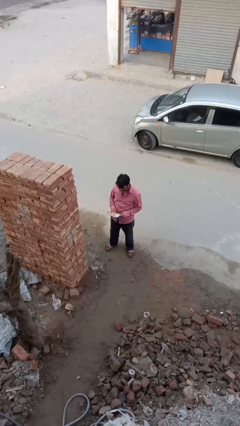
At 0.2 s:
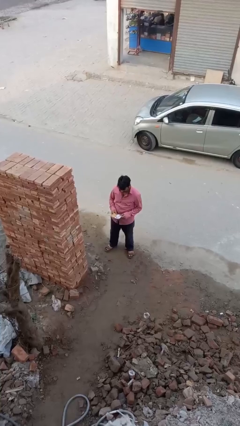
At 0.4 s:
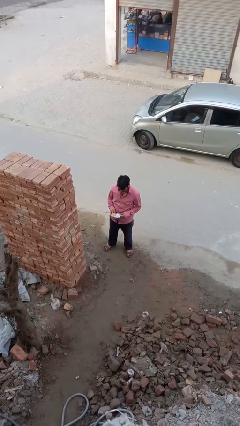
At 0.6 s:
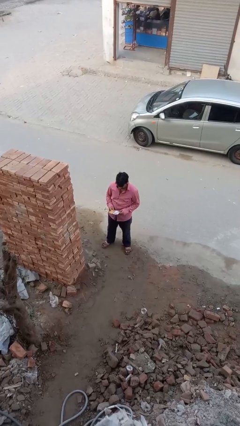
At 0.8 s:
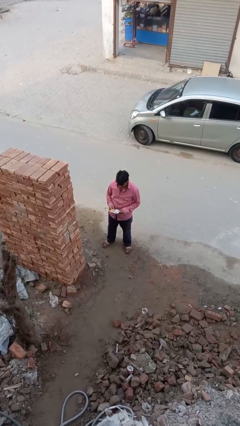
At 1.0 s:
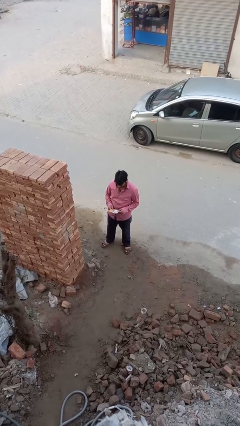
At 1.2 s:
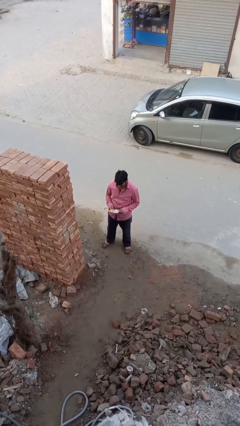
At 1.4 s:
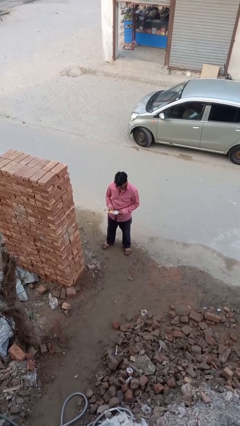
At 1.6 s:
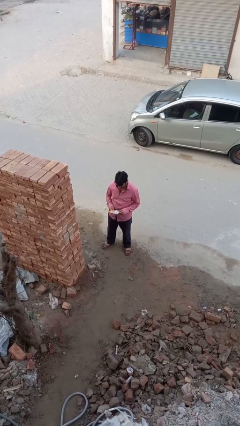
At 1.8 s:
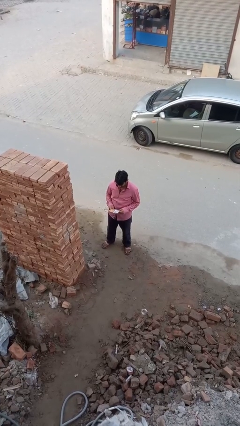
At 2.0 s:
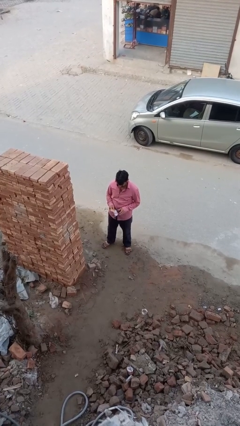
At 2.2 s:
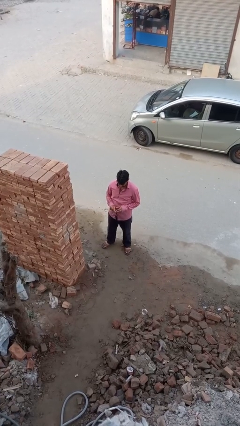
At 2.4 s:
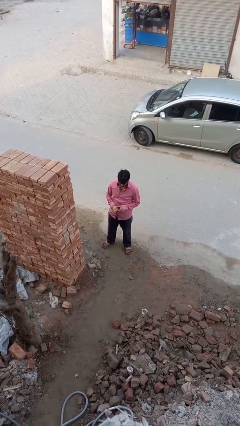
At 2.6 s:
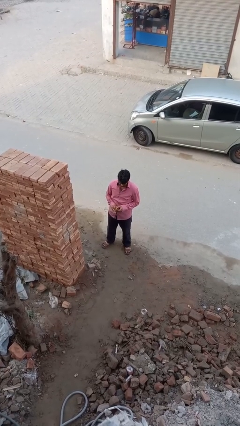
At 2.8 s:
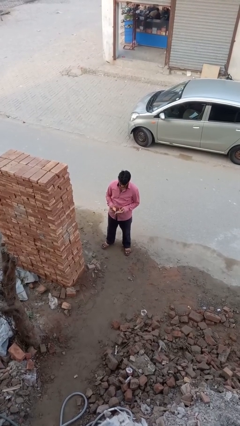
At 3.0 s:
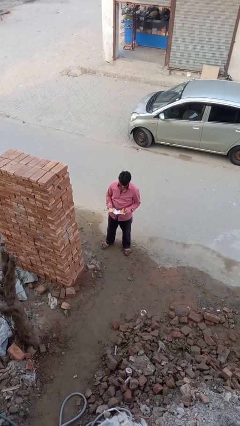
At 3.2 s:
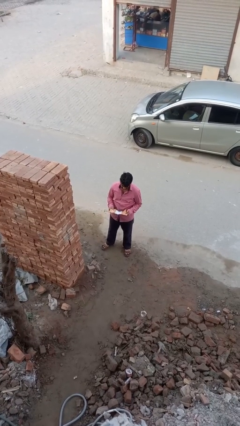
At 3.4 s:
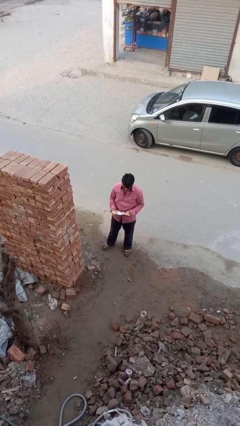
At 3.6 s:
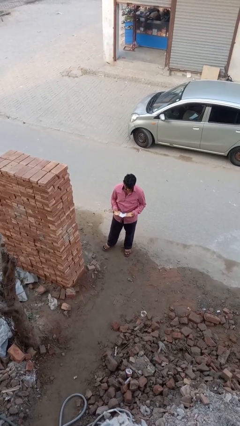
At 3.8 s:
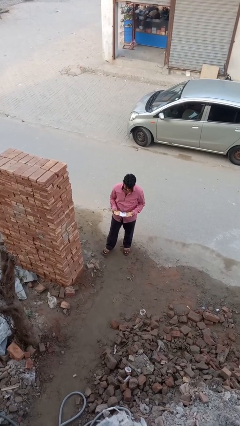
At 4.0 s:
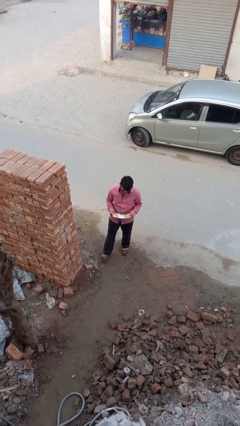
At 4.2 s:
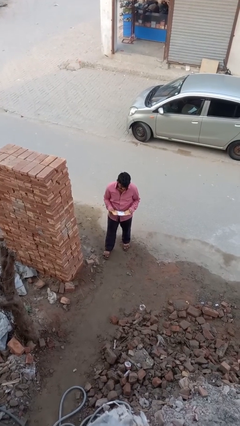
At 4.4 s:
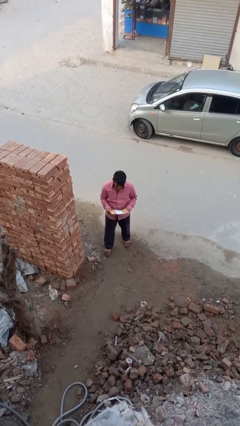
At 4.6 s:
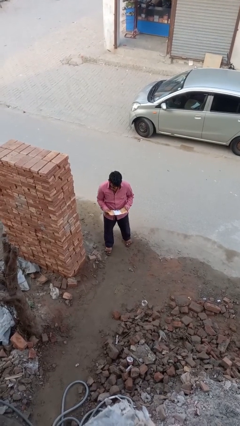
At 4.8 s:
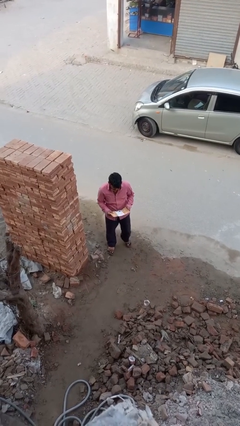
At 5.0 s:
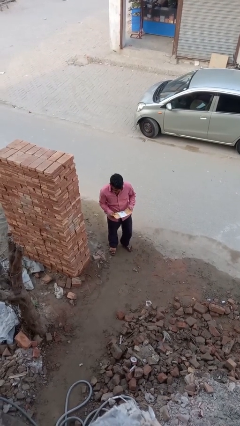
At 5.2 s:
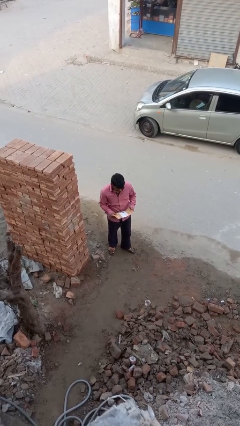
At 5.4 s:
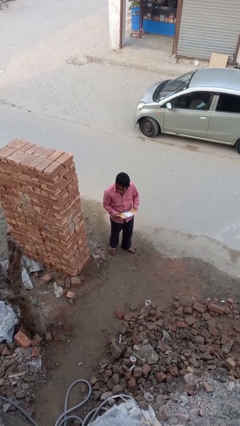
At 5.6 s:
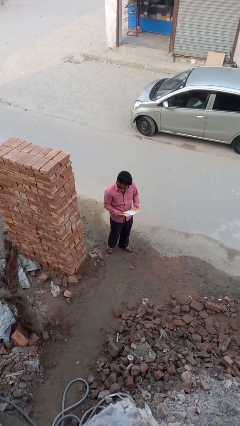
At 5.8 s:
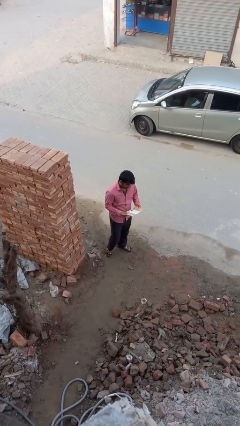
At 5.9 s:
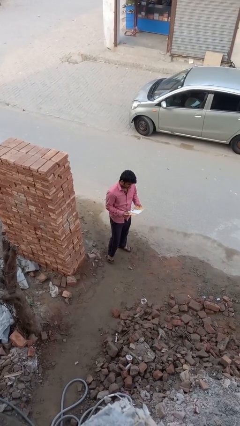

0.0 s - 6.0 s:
person reads document

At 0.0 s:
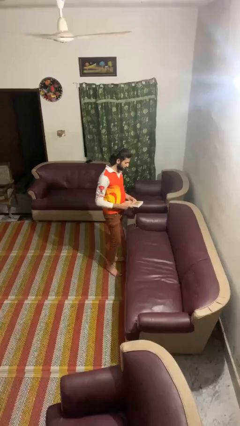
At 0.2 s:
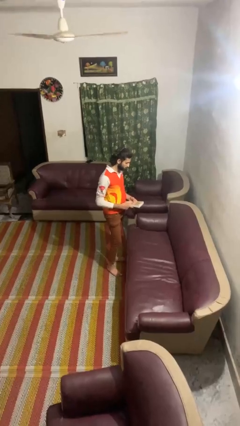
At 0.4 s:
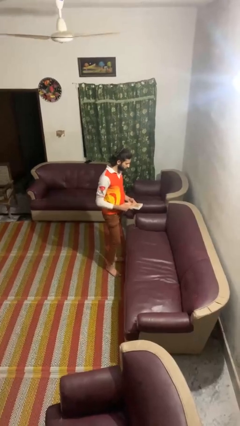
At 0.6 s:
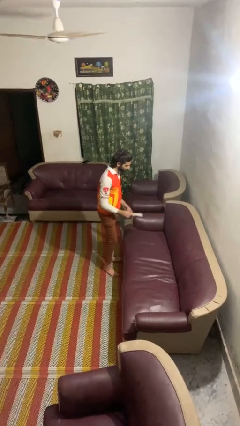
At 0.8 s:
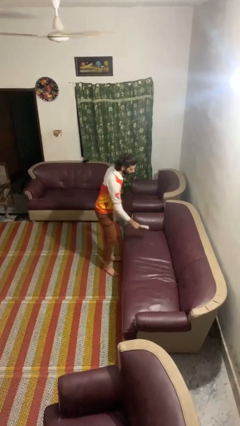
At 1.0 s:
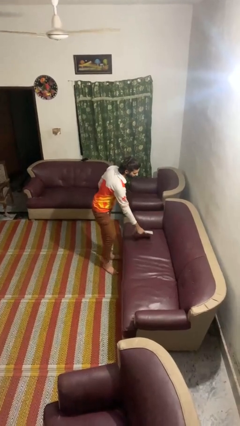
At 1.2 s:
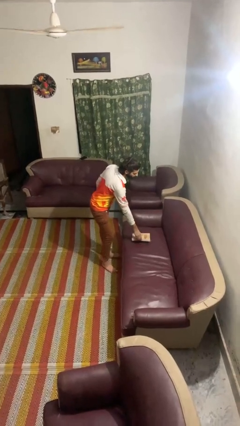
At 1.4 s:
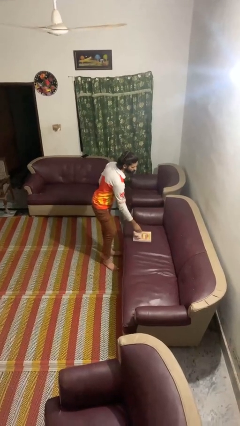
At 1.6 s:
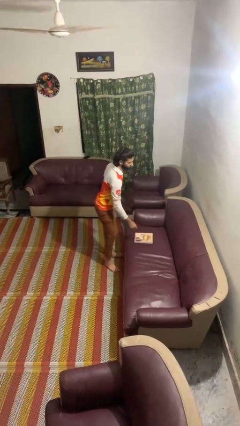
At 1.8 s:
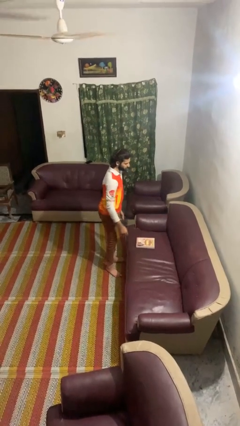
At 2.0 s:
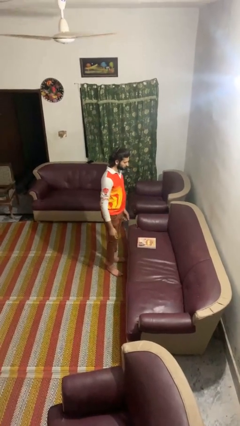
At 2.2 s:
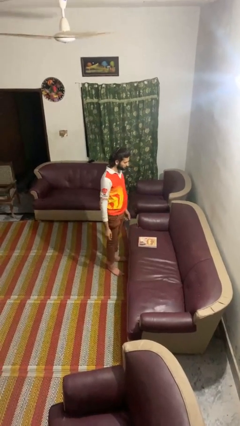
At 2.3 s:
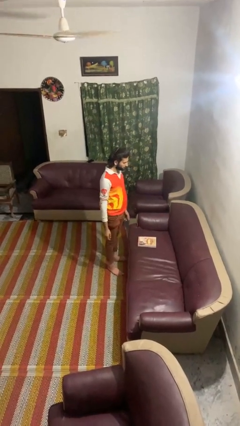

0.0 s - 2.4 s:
person puts down object on couch

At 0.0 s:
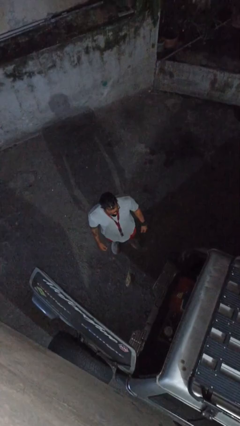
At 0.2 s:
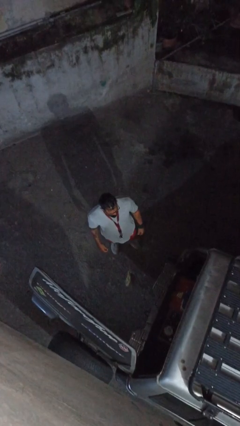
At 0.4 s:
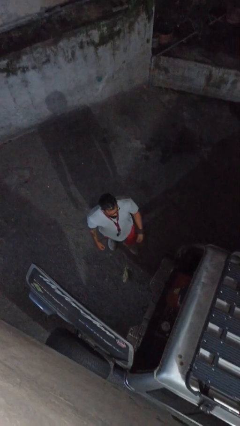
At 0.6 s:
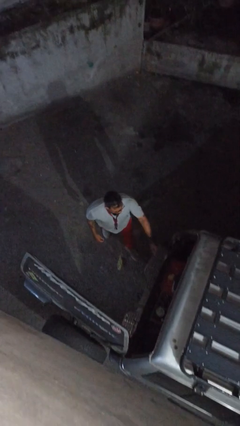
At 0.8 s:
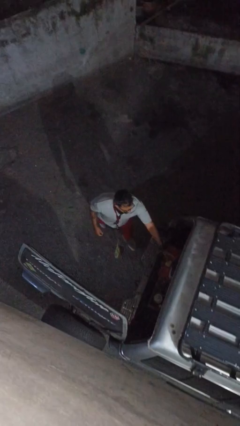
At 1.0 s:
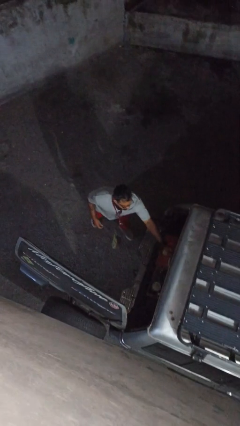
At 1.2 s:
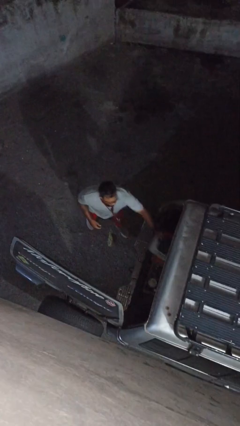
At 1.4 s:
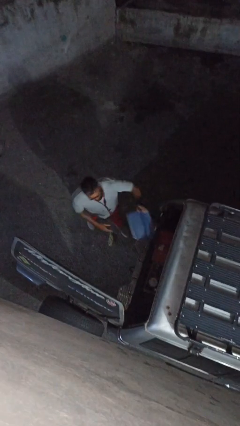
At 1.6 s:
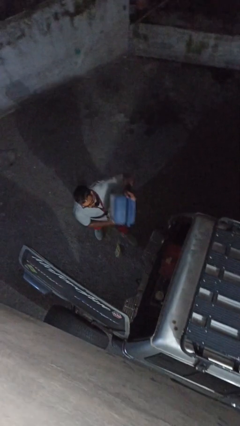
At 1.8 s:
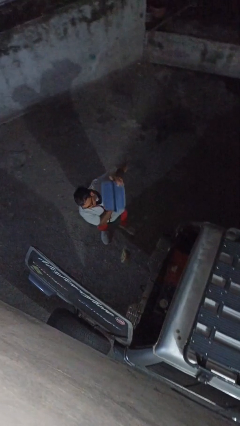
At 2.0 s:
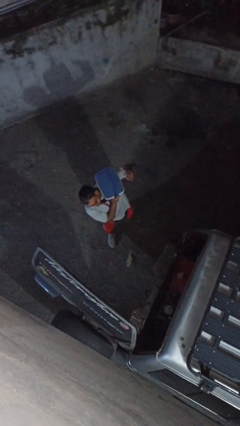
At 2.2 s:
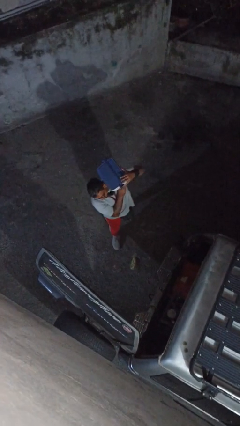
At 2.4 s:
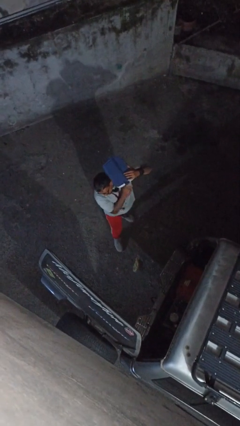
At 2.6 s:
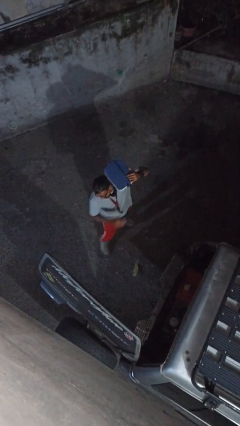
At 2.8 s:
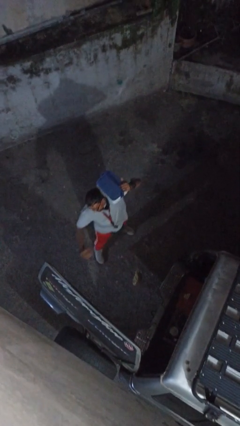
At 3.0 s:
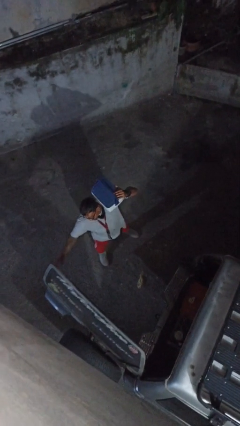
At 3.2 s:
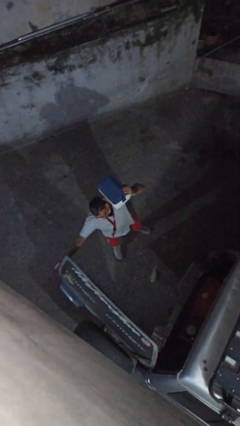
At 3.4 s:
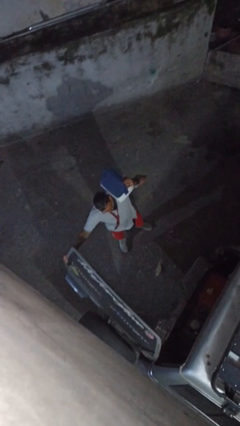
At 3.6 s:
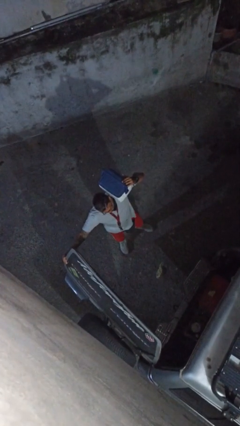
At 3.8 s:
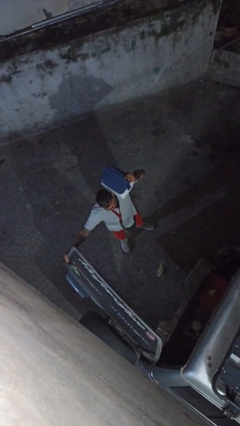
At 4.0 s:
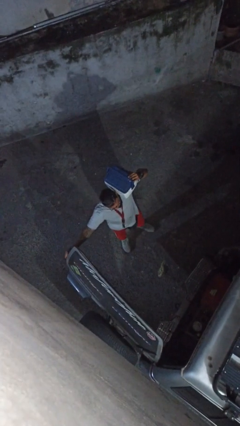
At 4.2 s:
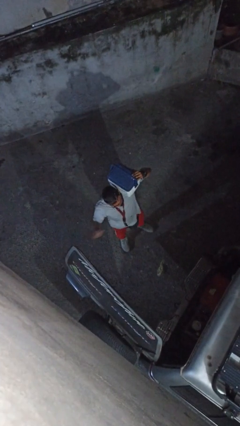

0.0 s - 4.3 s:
person unloads car

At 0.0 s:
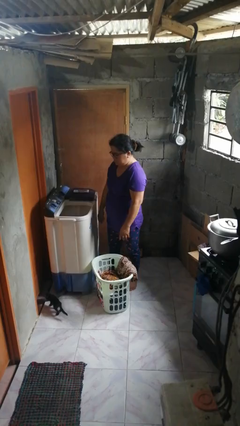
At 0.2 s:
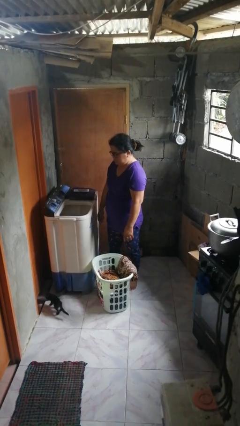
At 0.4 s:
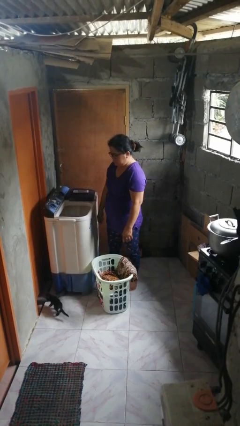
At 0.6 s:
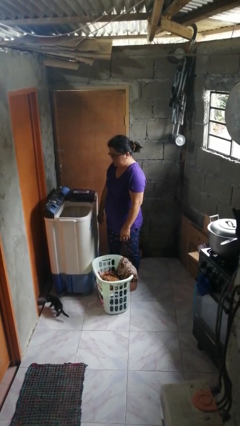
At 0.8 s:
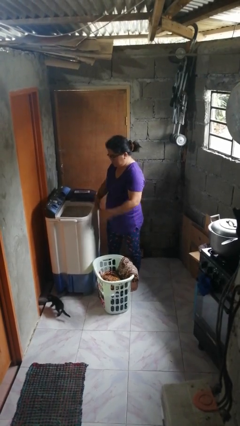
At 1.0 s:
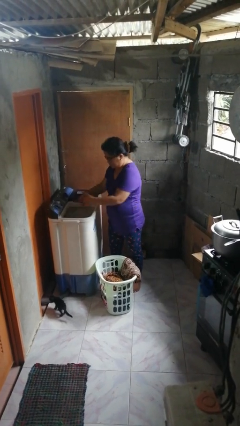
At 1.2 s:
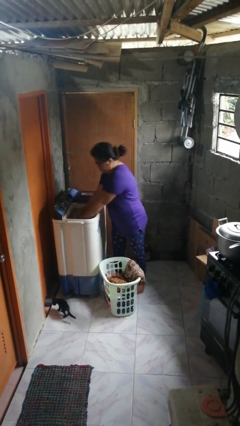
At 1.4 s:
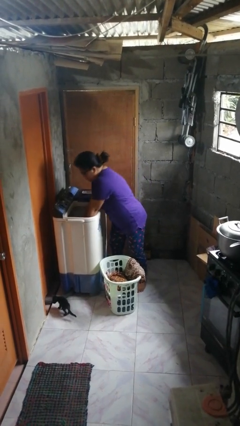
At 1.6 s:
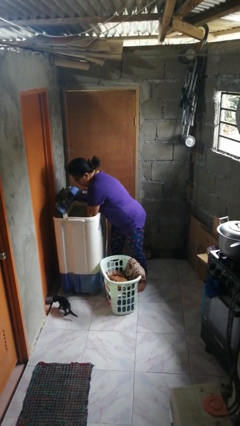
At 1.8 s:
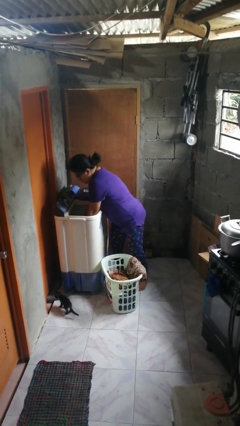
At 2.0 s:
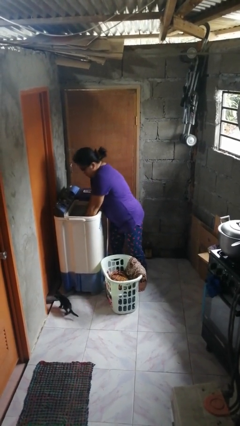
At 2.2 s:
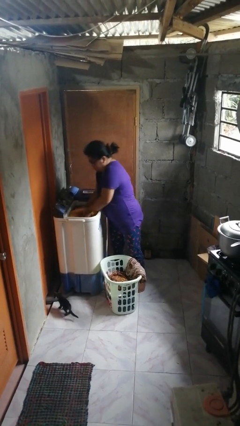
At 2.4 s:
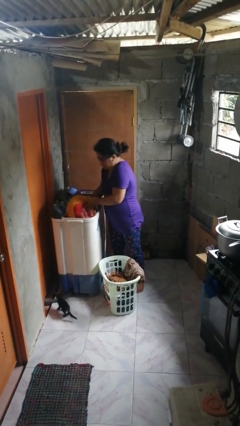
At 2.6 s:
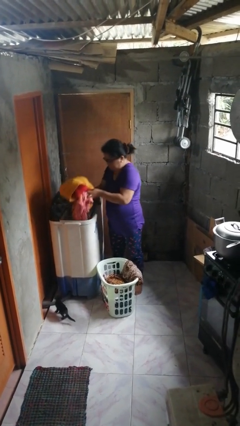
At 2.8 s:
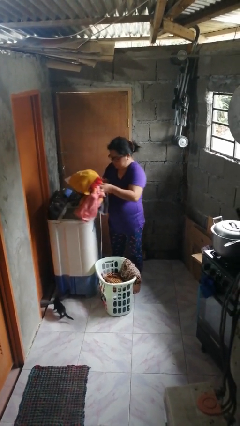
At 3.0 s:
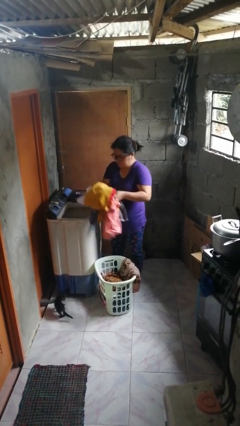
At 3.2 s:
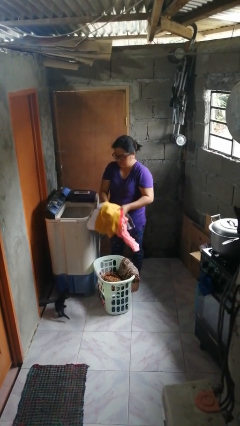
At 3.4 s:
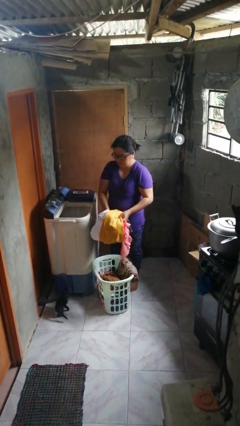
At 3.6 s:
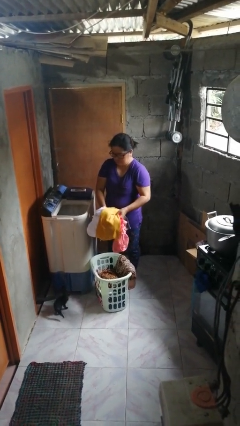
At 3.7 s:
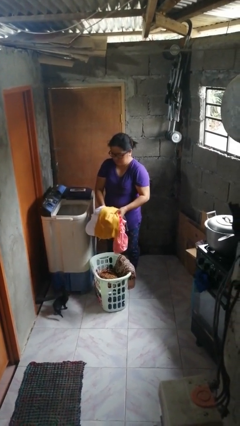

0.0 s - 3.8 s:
person unloads clotheswasher

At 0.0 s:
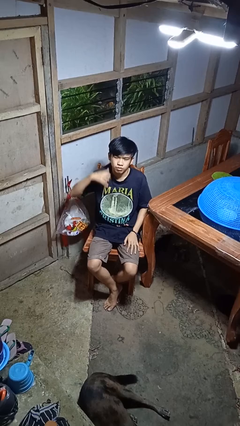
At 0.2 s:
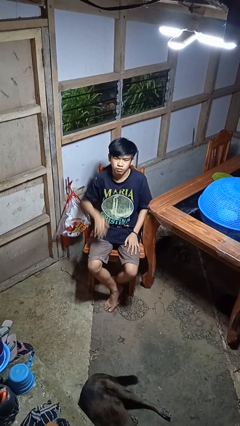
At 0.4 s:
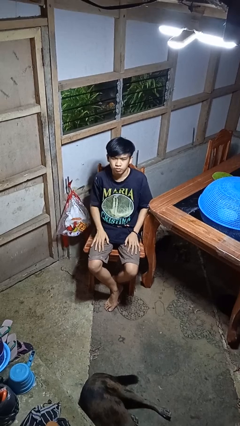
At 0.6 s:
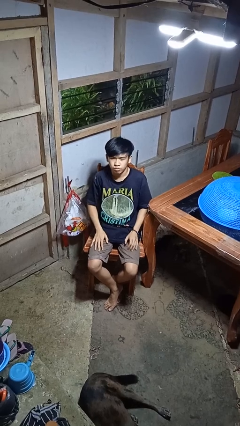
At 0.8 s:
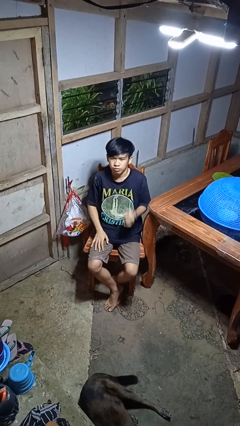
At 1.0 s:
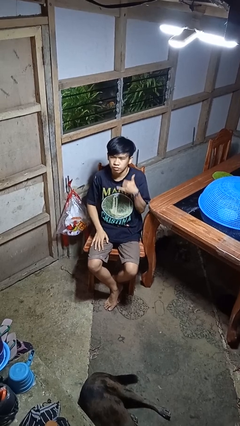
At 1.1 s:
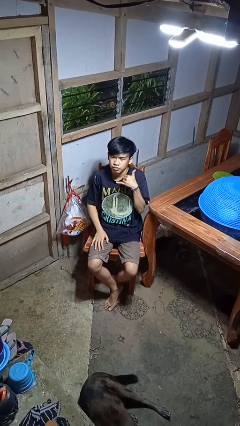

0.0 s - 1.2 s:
person gestures call me
